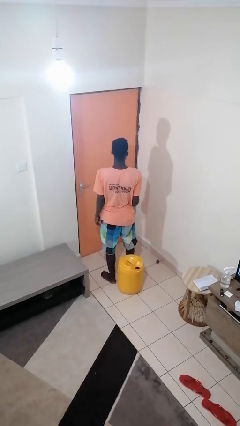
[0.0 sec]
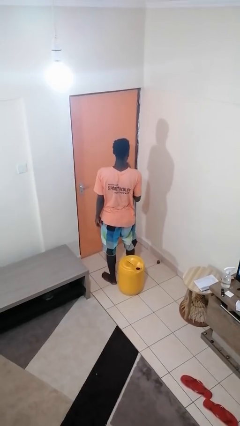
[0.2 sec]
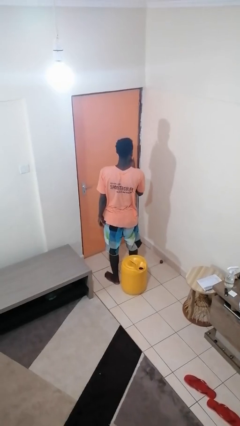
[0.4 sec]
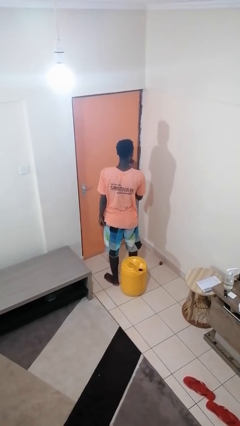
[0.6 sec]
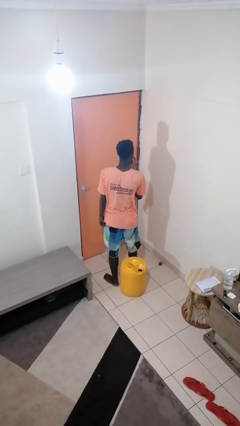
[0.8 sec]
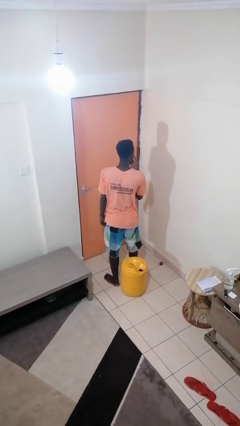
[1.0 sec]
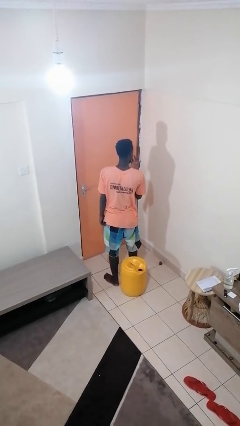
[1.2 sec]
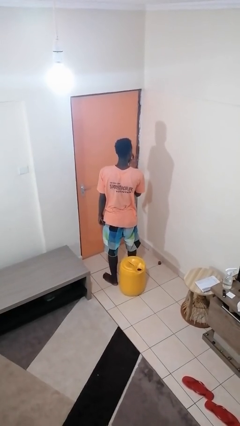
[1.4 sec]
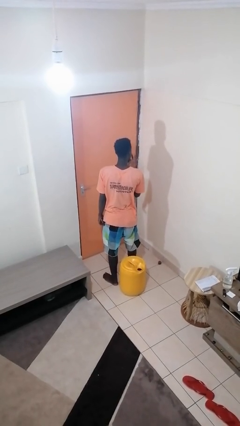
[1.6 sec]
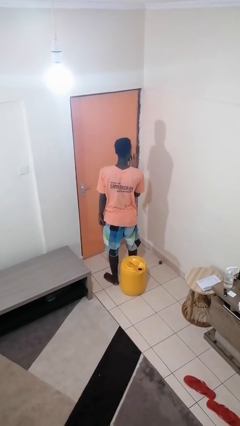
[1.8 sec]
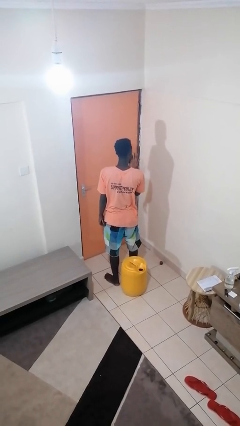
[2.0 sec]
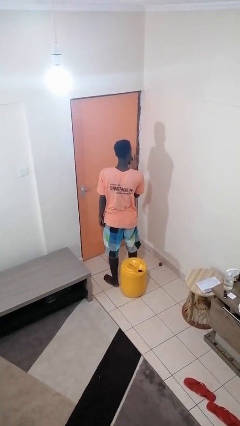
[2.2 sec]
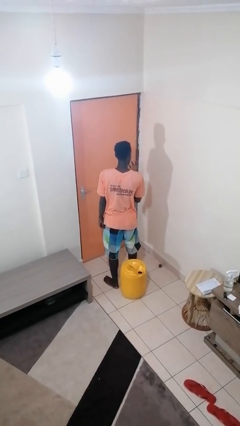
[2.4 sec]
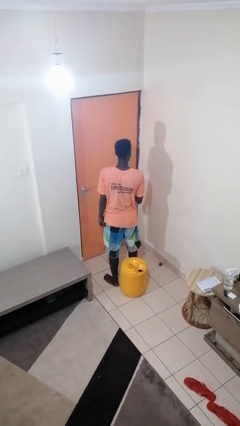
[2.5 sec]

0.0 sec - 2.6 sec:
person licks fingers

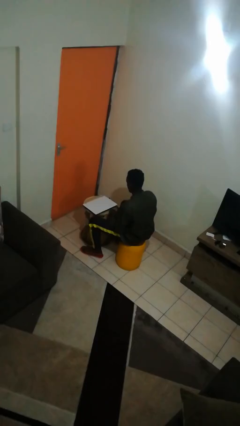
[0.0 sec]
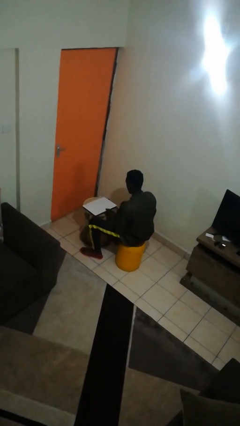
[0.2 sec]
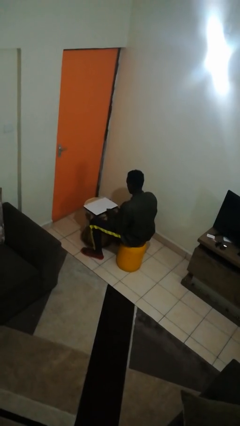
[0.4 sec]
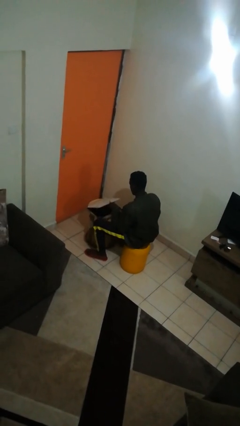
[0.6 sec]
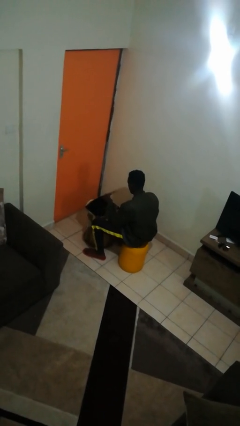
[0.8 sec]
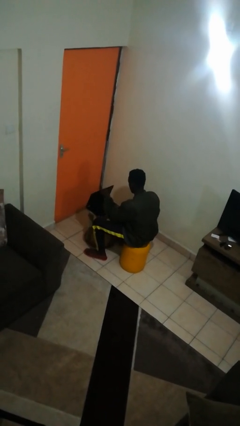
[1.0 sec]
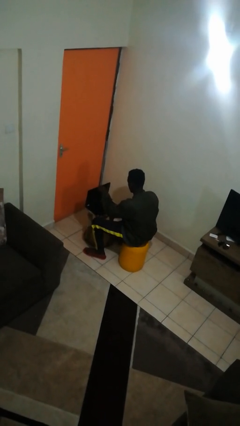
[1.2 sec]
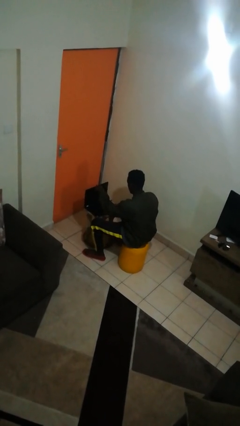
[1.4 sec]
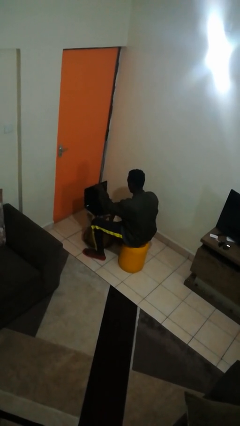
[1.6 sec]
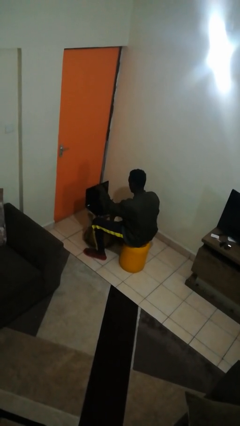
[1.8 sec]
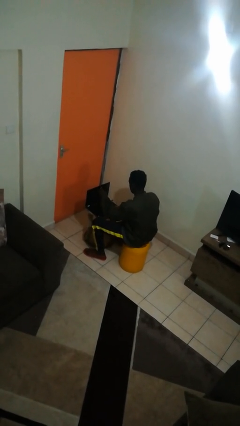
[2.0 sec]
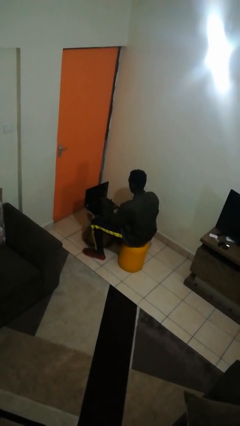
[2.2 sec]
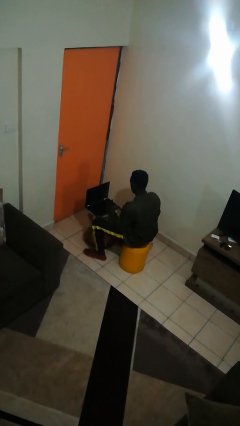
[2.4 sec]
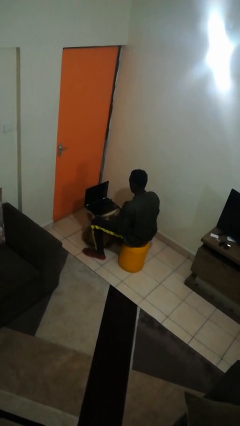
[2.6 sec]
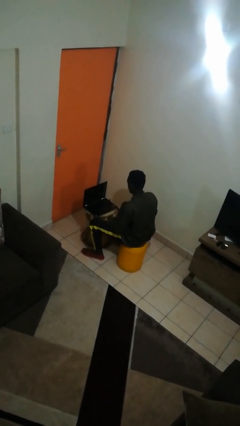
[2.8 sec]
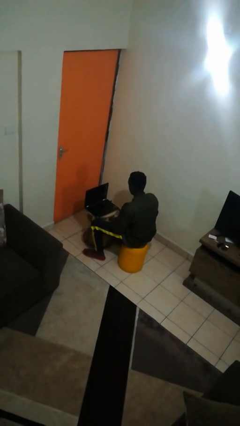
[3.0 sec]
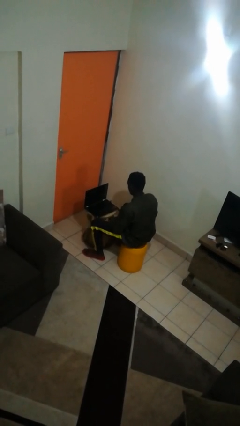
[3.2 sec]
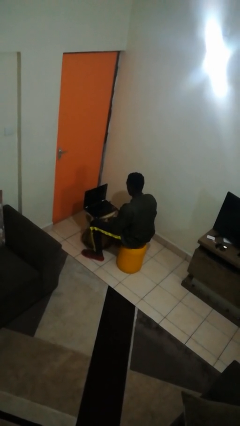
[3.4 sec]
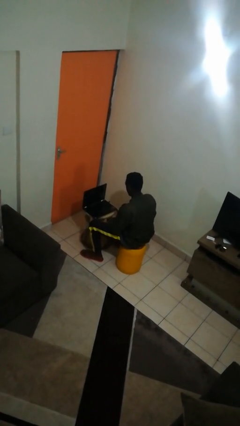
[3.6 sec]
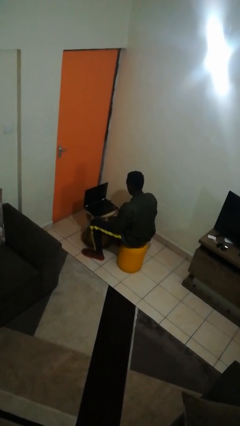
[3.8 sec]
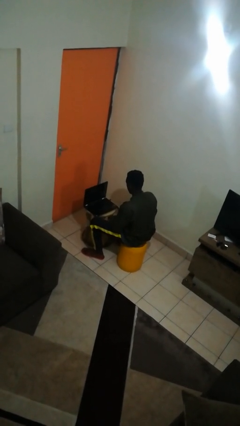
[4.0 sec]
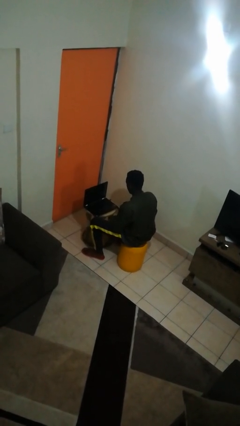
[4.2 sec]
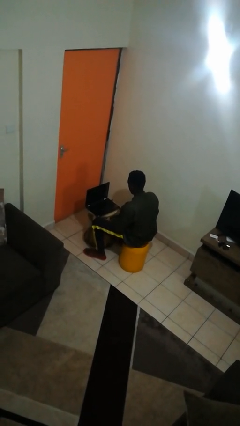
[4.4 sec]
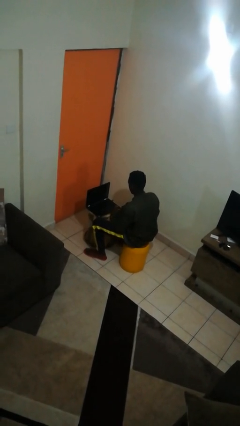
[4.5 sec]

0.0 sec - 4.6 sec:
person opens laptop

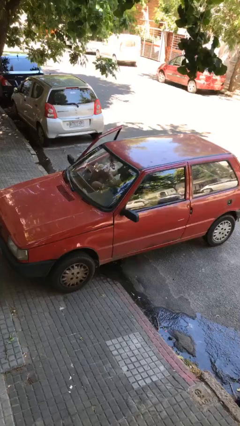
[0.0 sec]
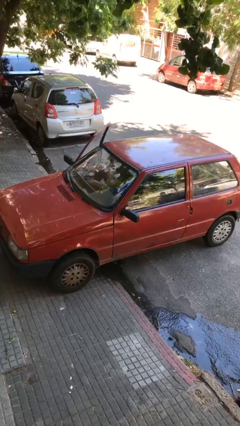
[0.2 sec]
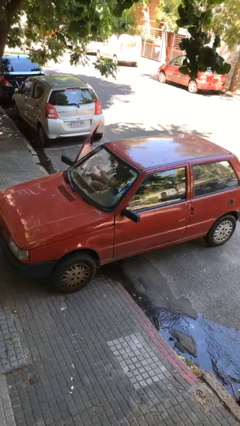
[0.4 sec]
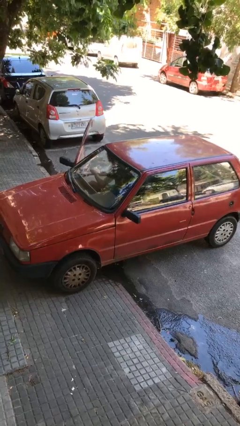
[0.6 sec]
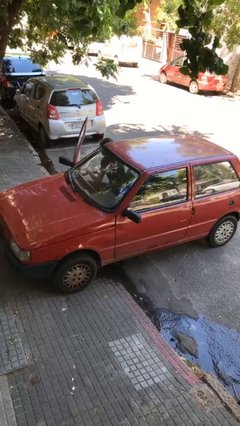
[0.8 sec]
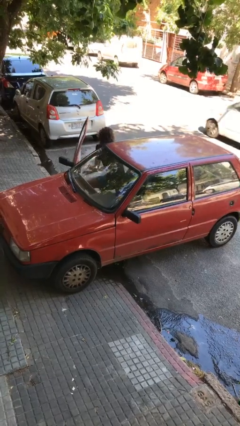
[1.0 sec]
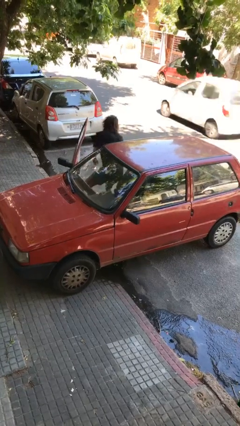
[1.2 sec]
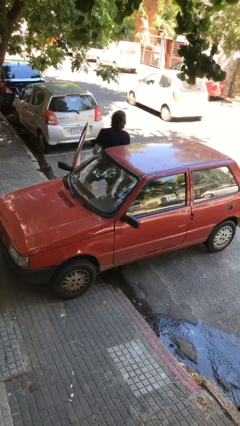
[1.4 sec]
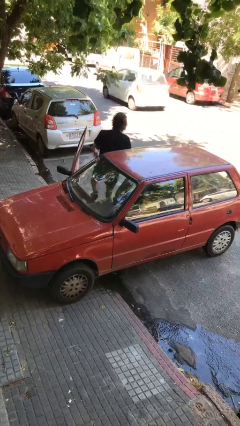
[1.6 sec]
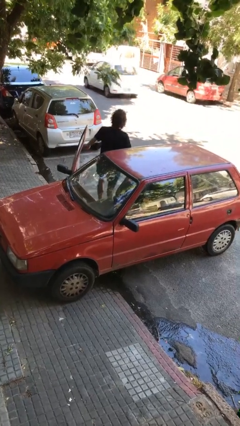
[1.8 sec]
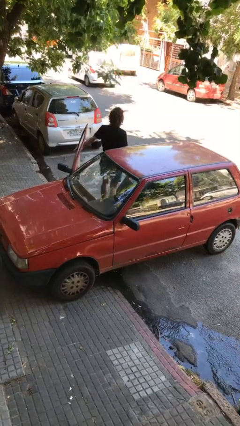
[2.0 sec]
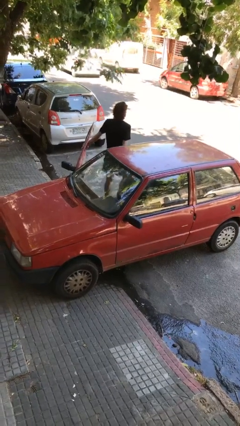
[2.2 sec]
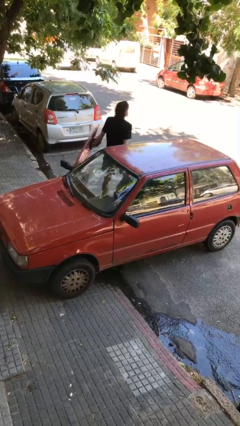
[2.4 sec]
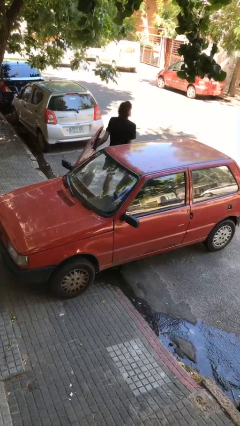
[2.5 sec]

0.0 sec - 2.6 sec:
car drops off person

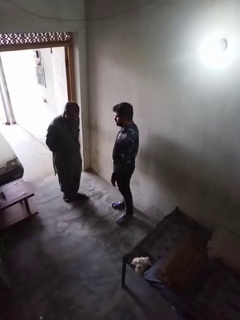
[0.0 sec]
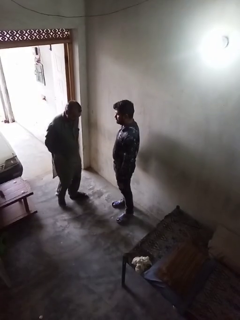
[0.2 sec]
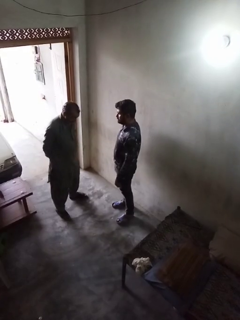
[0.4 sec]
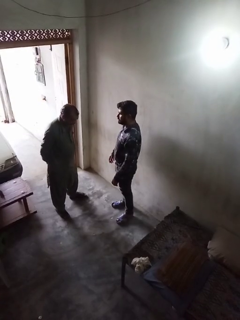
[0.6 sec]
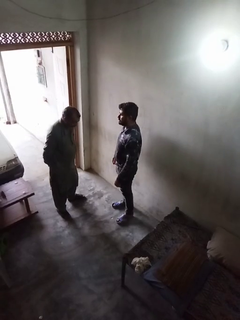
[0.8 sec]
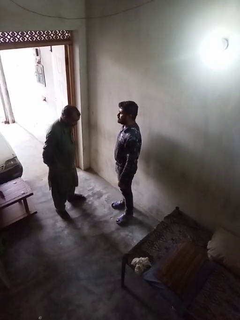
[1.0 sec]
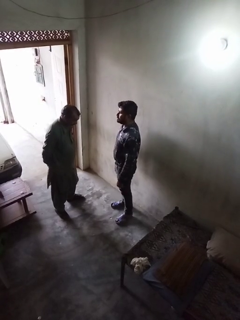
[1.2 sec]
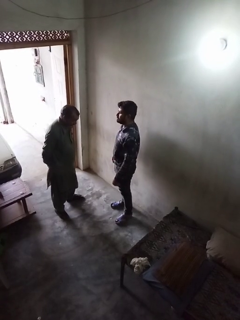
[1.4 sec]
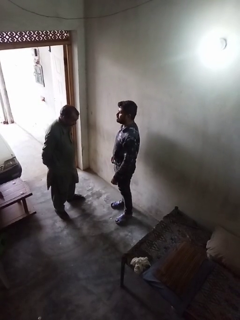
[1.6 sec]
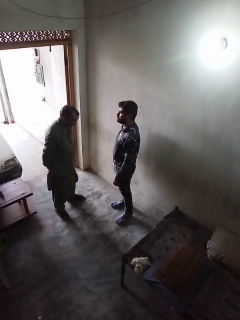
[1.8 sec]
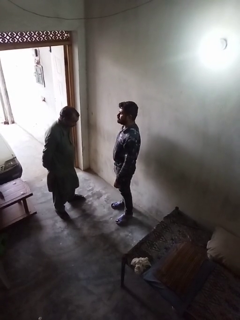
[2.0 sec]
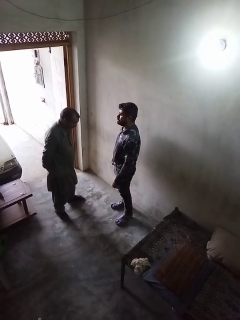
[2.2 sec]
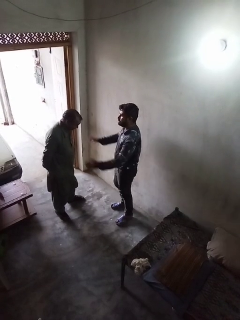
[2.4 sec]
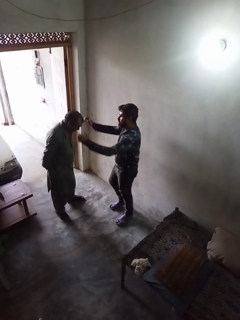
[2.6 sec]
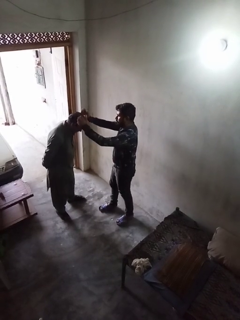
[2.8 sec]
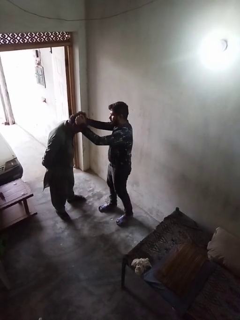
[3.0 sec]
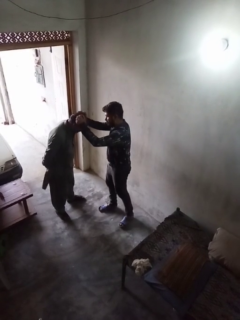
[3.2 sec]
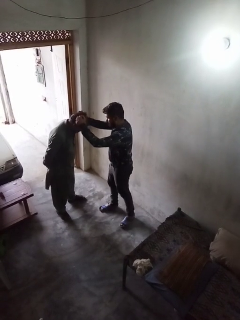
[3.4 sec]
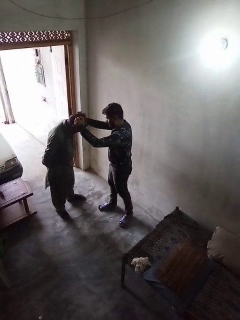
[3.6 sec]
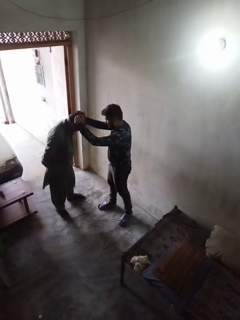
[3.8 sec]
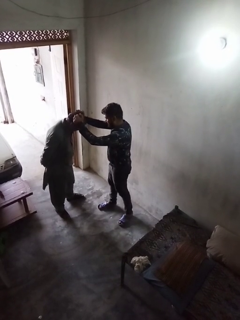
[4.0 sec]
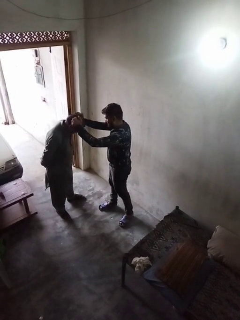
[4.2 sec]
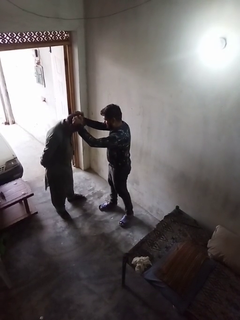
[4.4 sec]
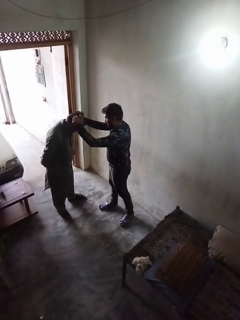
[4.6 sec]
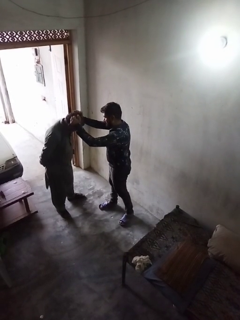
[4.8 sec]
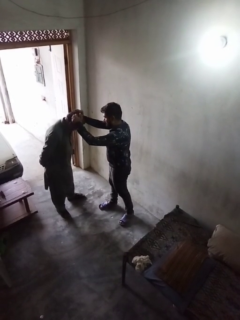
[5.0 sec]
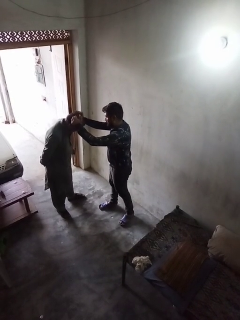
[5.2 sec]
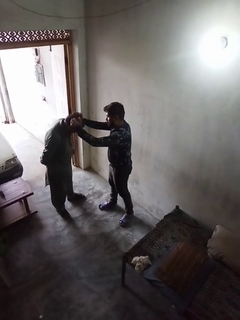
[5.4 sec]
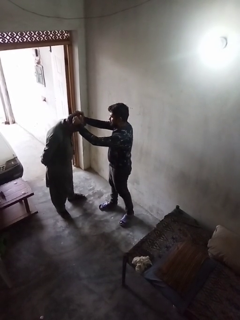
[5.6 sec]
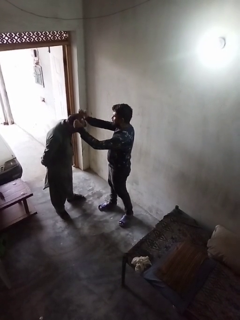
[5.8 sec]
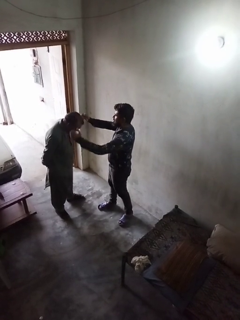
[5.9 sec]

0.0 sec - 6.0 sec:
person grabs person by hair

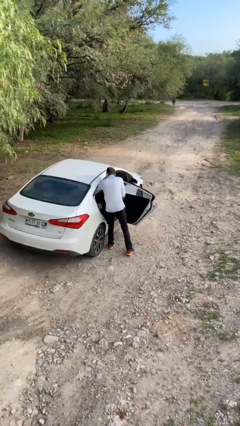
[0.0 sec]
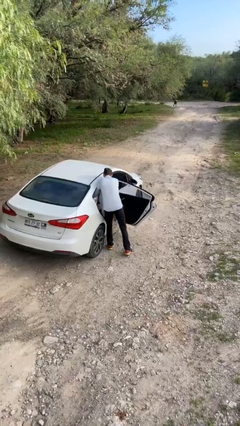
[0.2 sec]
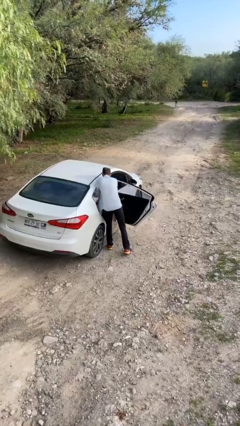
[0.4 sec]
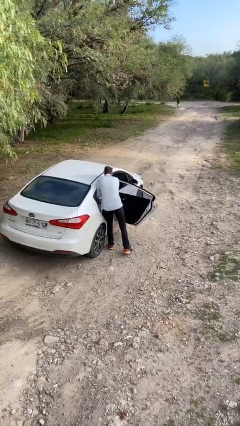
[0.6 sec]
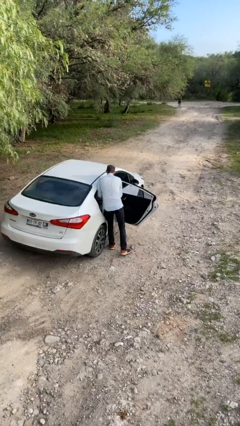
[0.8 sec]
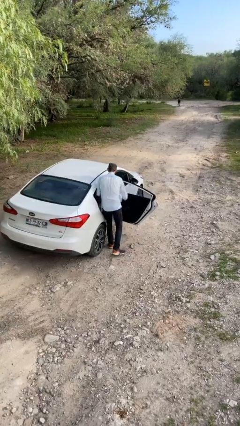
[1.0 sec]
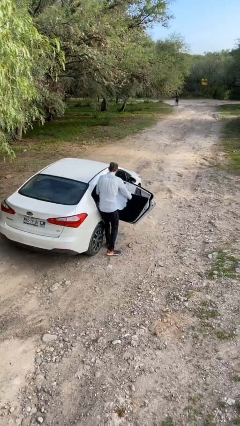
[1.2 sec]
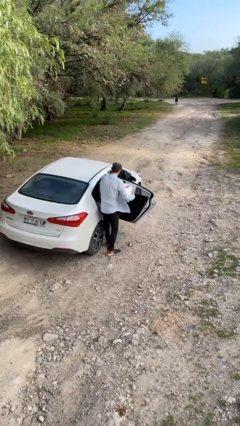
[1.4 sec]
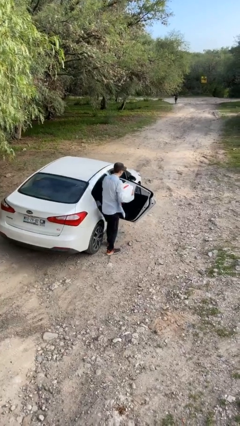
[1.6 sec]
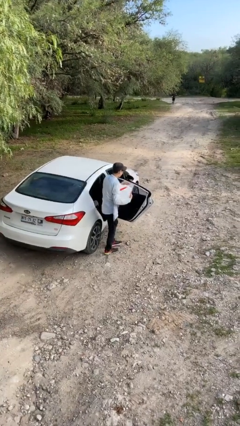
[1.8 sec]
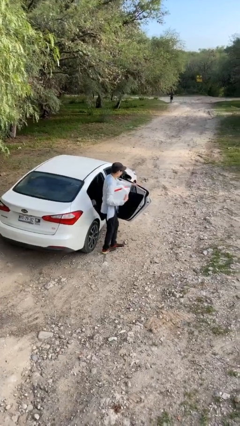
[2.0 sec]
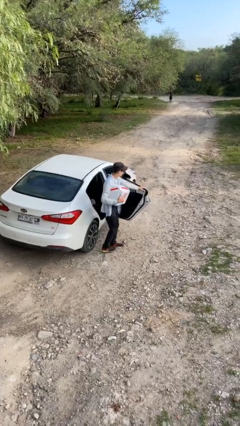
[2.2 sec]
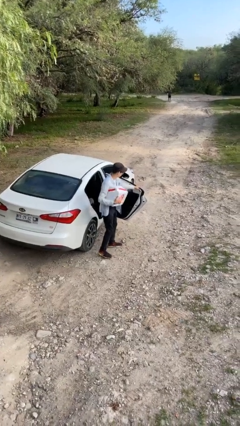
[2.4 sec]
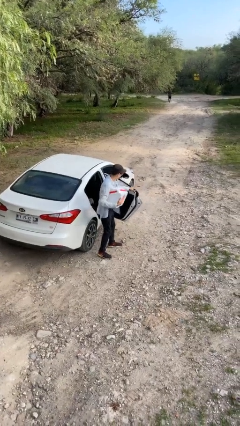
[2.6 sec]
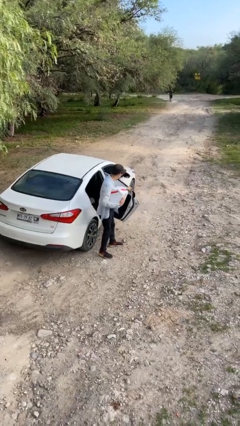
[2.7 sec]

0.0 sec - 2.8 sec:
person unloads car

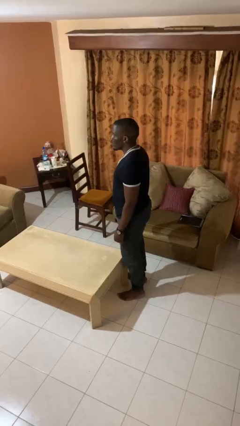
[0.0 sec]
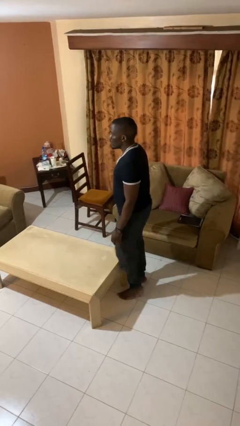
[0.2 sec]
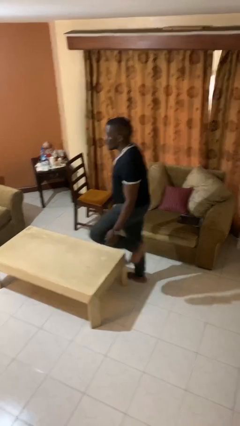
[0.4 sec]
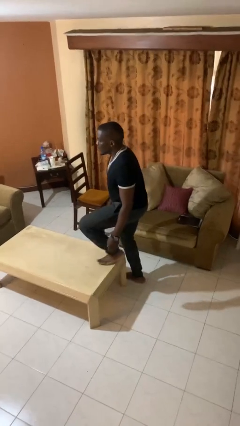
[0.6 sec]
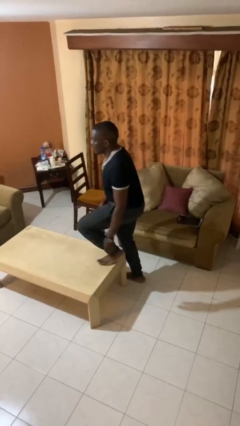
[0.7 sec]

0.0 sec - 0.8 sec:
person climbs off table
